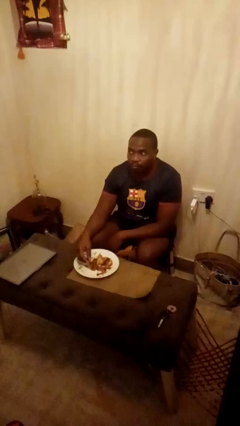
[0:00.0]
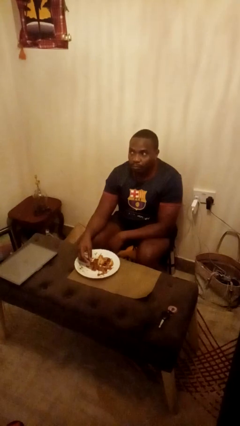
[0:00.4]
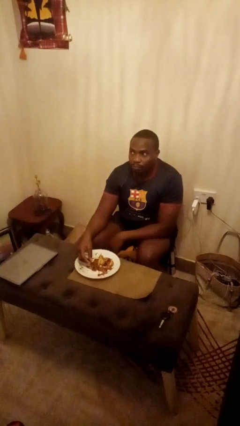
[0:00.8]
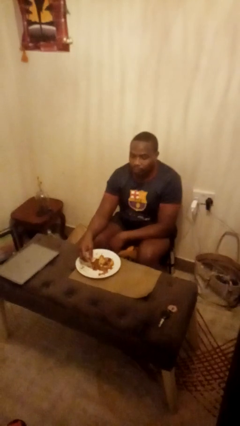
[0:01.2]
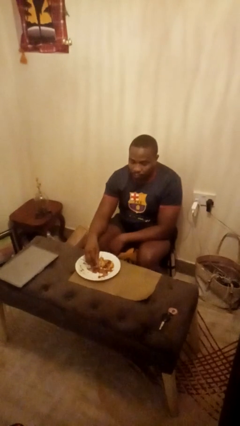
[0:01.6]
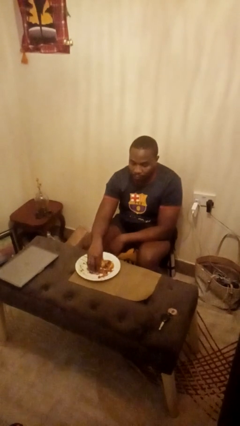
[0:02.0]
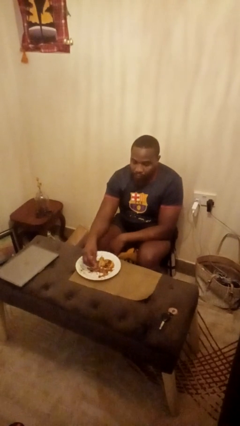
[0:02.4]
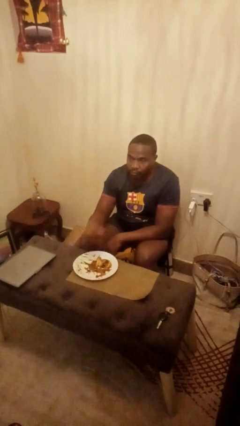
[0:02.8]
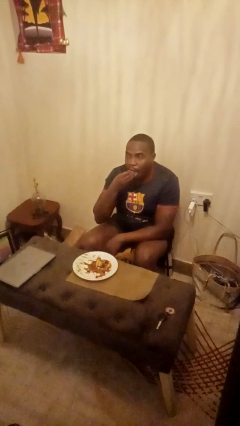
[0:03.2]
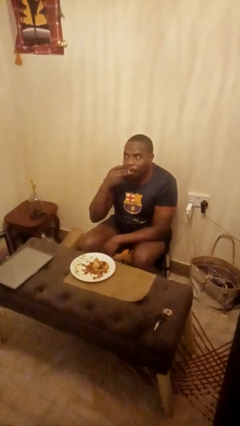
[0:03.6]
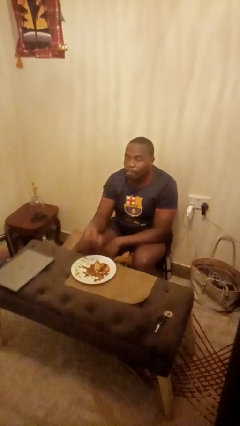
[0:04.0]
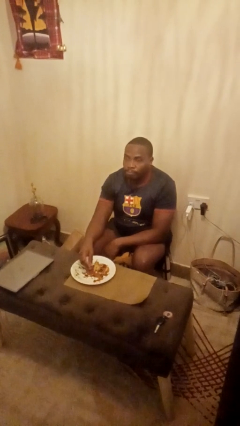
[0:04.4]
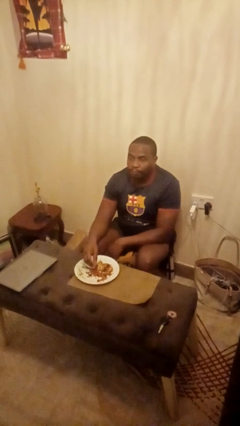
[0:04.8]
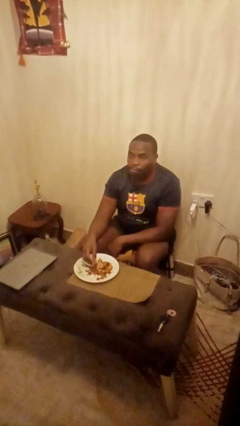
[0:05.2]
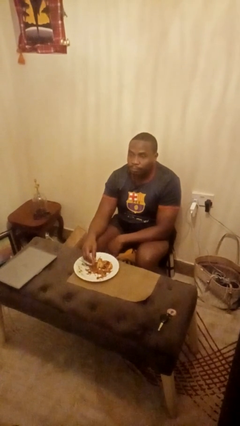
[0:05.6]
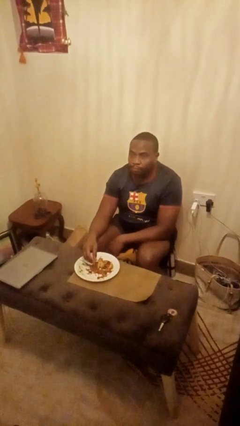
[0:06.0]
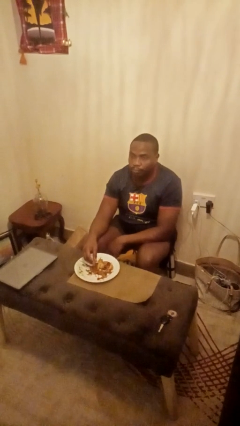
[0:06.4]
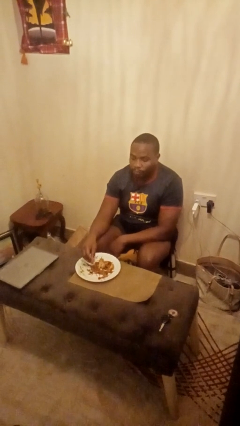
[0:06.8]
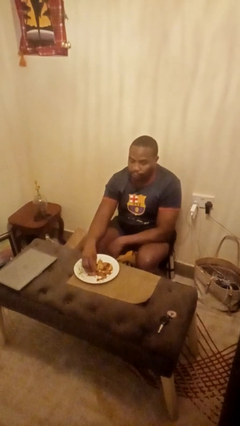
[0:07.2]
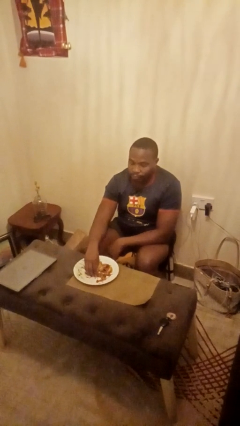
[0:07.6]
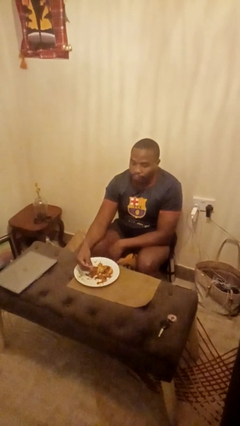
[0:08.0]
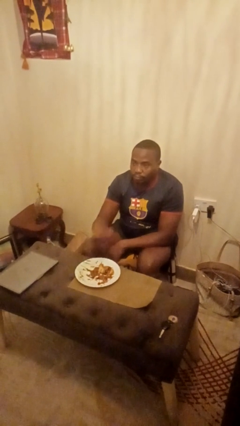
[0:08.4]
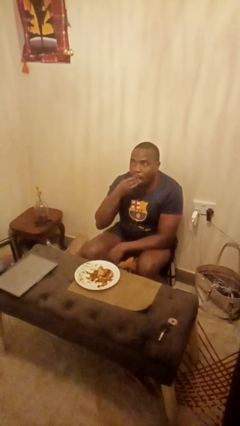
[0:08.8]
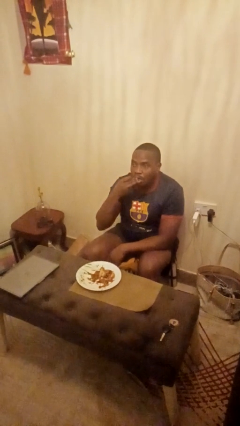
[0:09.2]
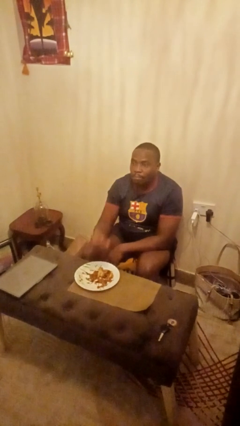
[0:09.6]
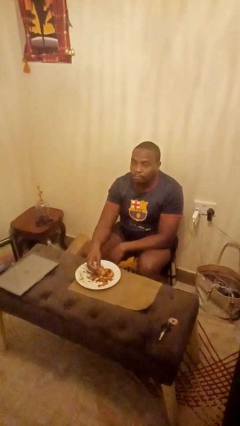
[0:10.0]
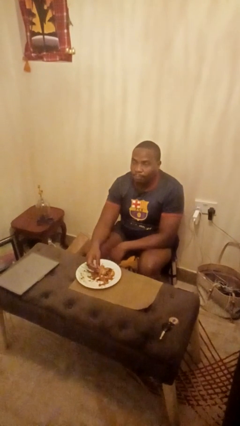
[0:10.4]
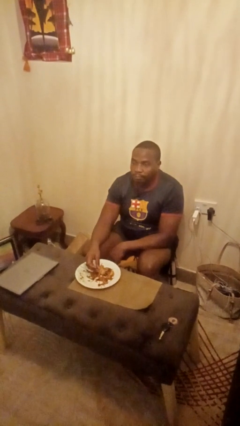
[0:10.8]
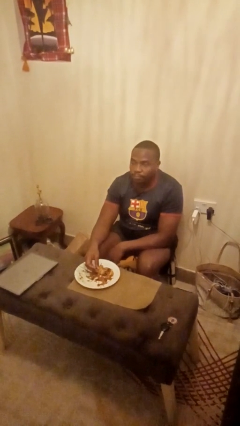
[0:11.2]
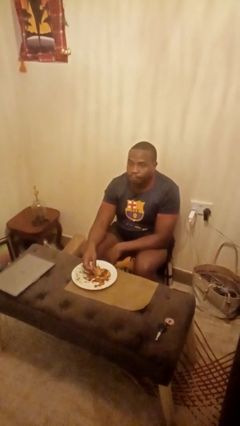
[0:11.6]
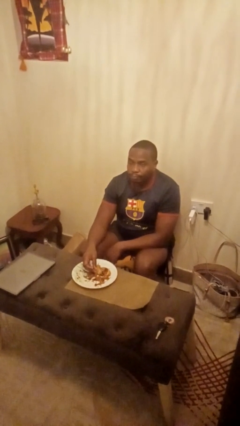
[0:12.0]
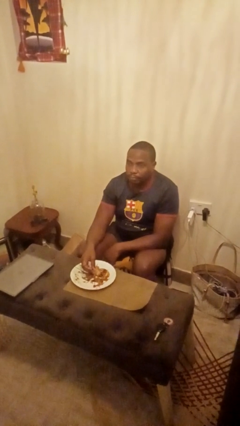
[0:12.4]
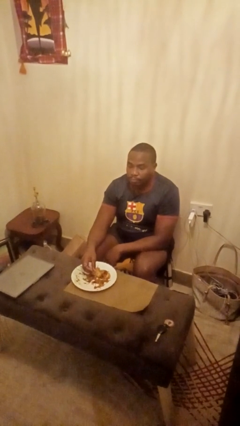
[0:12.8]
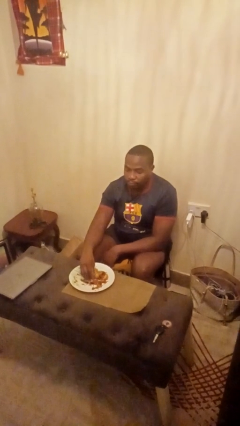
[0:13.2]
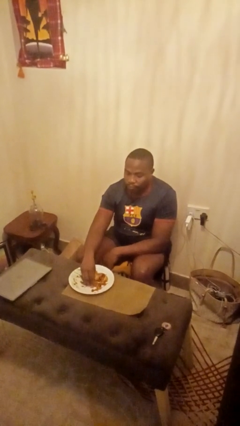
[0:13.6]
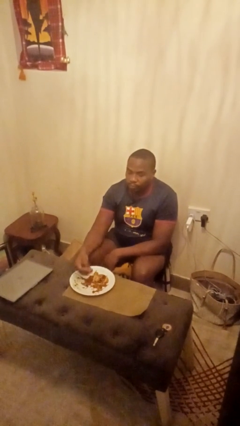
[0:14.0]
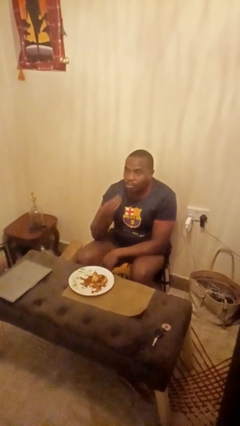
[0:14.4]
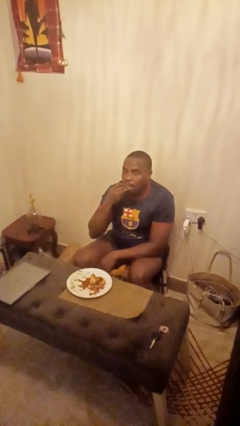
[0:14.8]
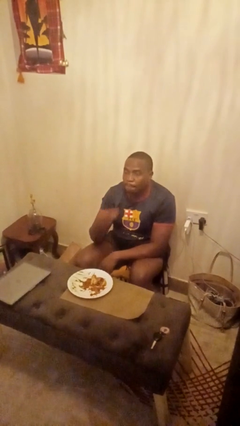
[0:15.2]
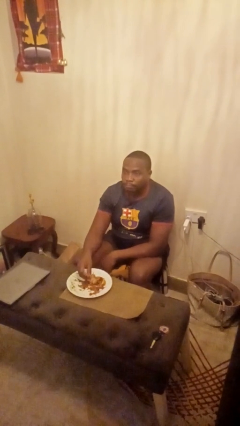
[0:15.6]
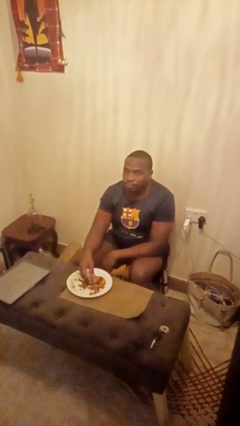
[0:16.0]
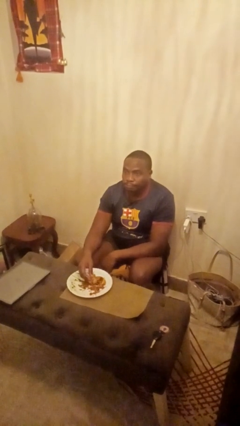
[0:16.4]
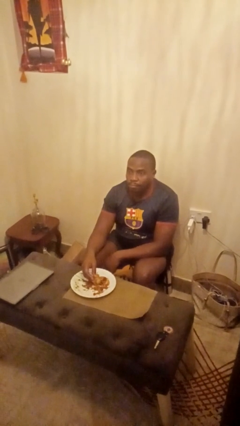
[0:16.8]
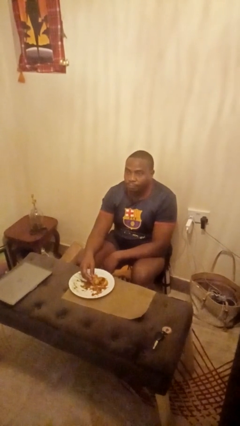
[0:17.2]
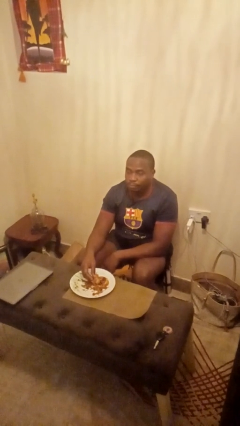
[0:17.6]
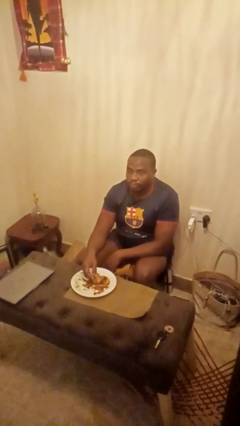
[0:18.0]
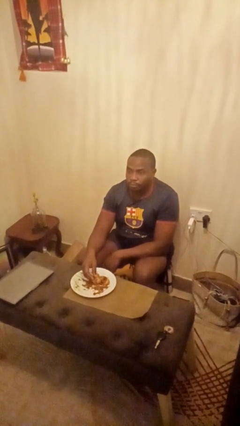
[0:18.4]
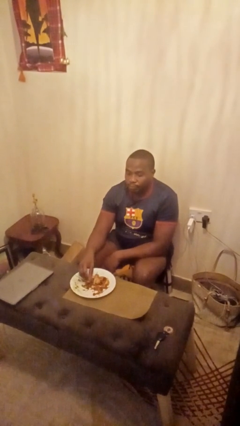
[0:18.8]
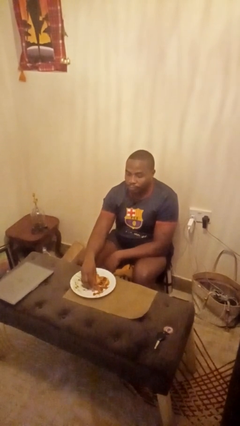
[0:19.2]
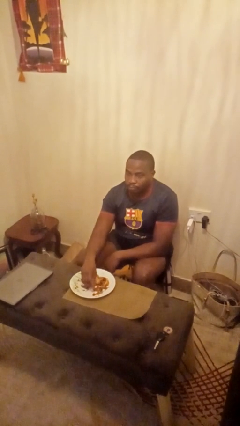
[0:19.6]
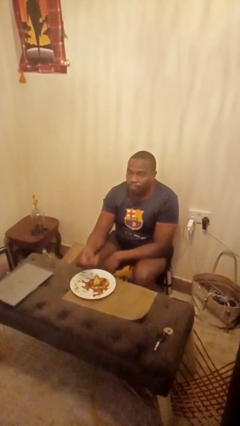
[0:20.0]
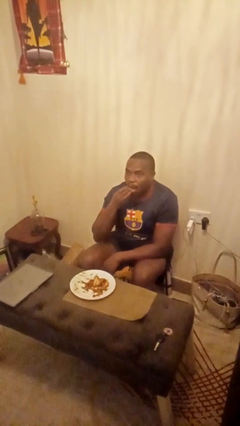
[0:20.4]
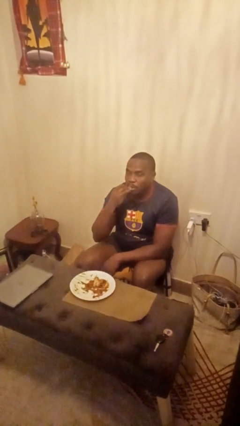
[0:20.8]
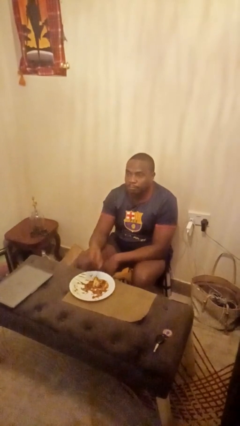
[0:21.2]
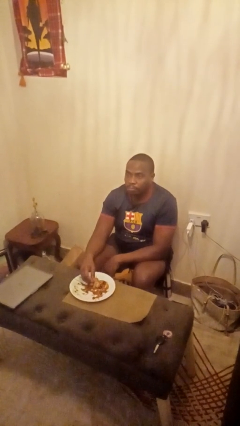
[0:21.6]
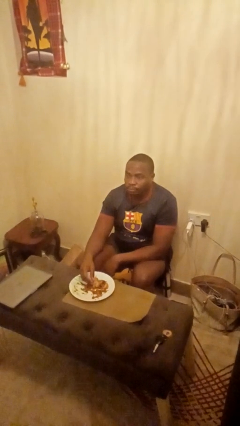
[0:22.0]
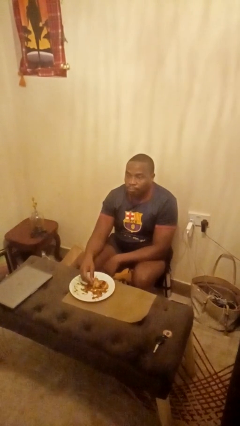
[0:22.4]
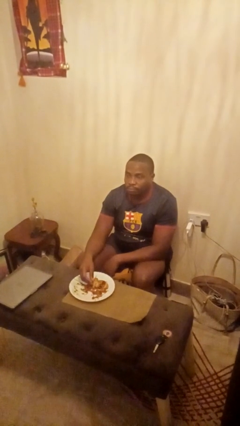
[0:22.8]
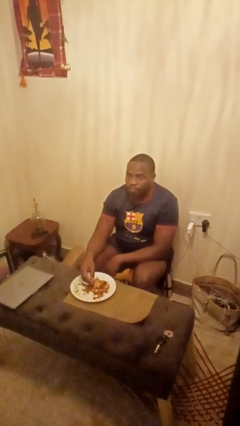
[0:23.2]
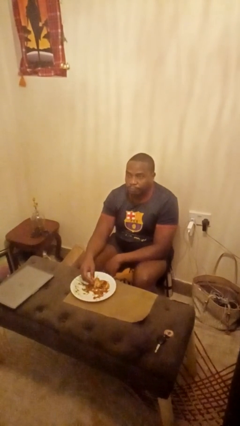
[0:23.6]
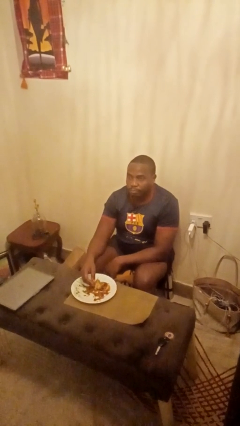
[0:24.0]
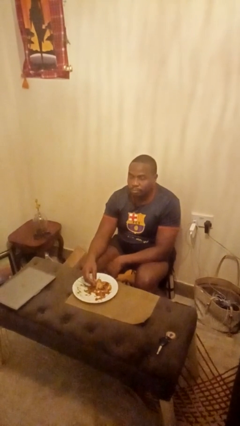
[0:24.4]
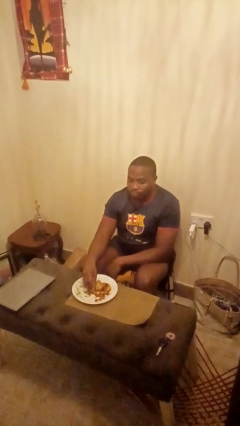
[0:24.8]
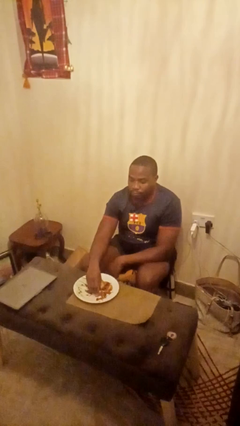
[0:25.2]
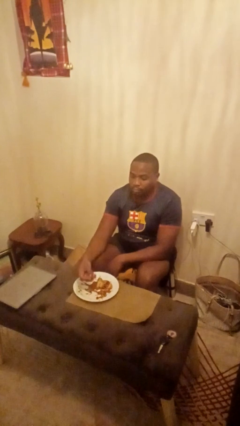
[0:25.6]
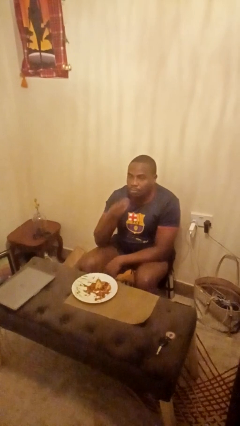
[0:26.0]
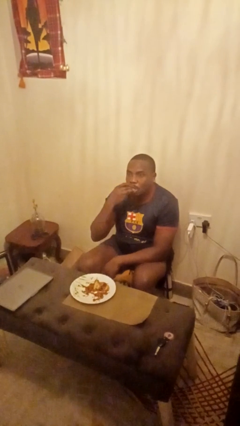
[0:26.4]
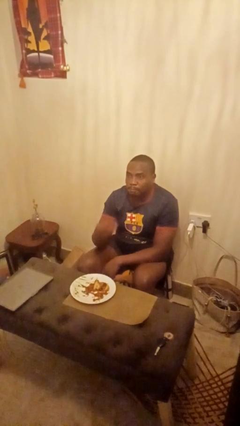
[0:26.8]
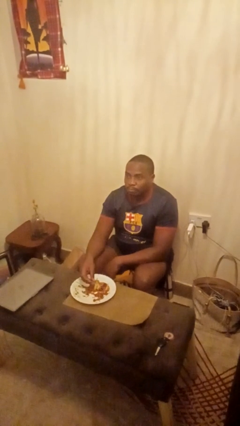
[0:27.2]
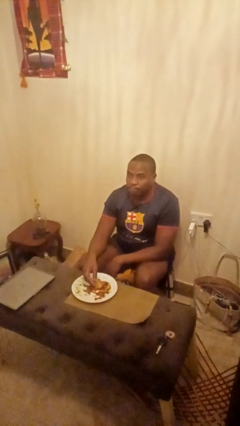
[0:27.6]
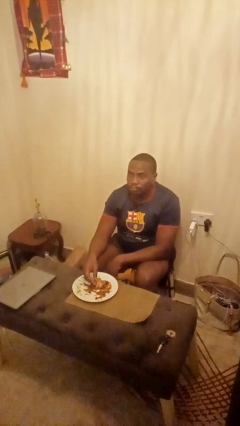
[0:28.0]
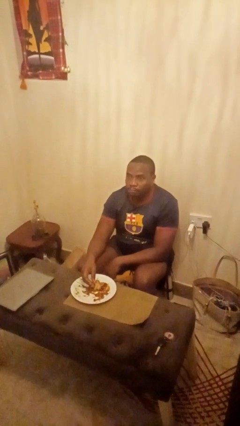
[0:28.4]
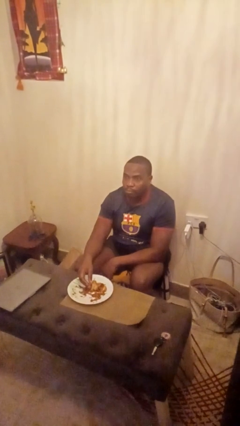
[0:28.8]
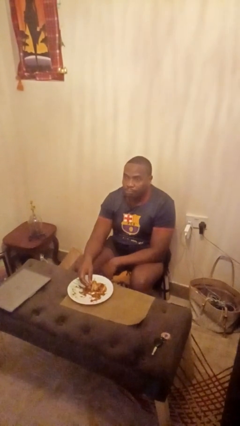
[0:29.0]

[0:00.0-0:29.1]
person eats with hands

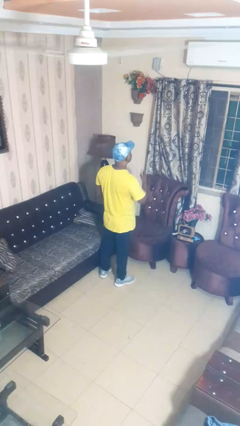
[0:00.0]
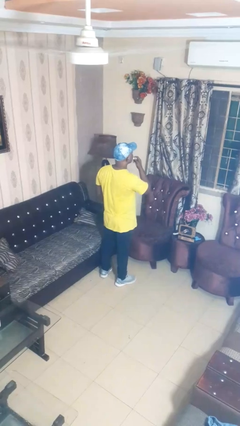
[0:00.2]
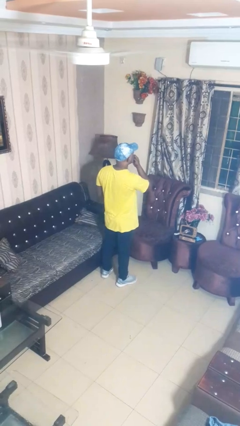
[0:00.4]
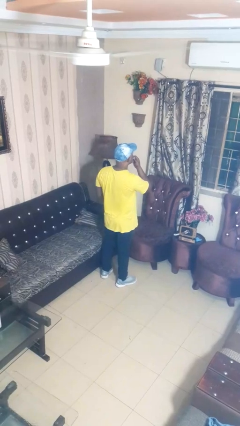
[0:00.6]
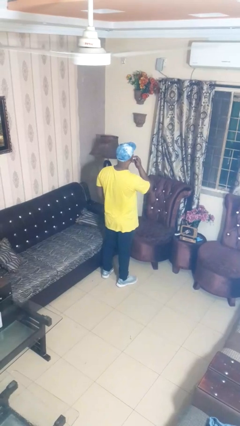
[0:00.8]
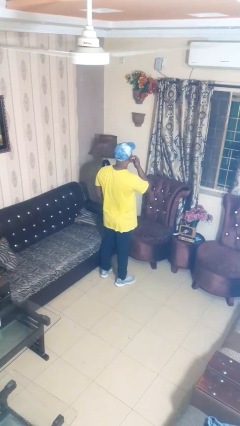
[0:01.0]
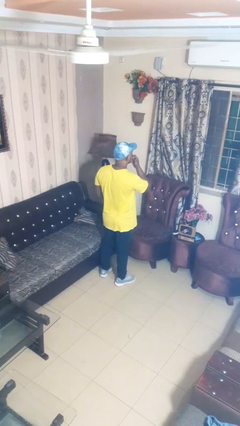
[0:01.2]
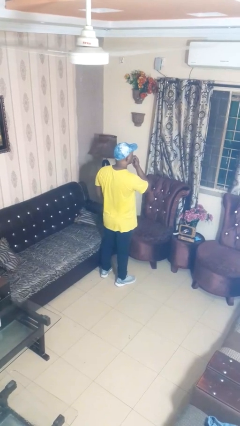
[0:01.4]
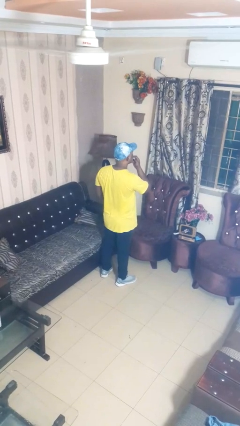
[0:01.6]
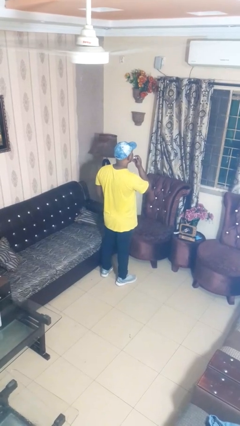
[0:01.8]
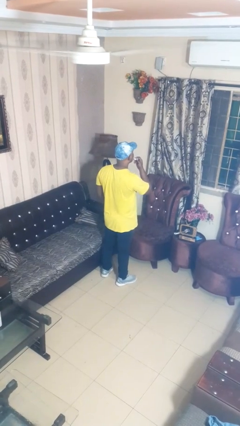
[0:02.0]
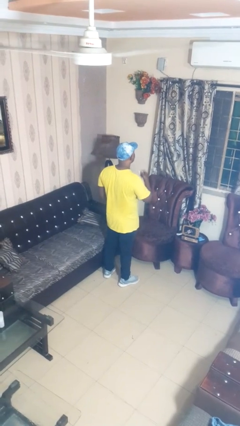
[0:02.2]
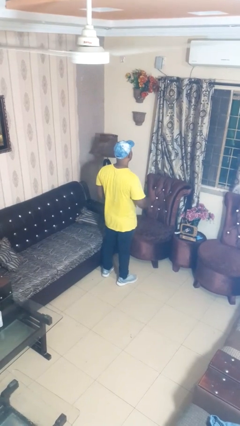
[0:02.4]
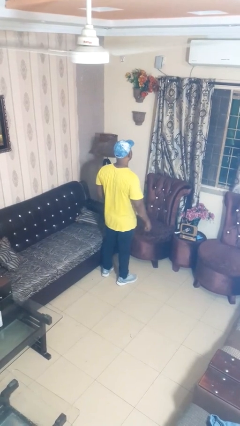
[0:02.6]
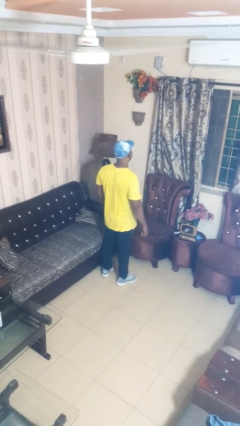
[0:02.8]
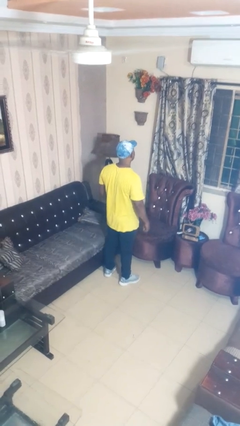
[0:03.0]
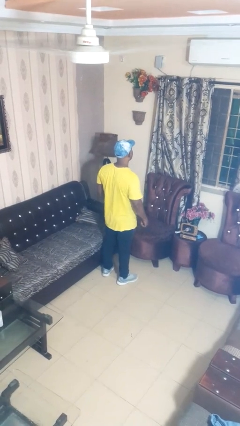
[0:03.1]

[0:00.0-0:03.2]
person applies lip makeup
